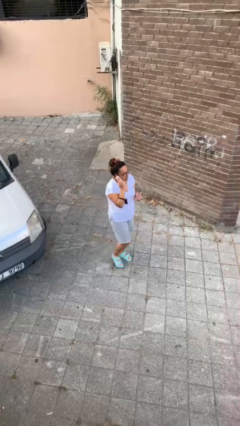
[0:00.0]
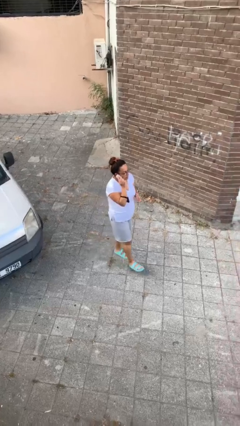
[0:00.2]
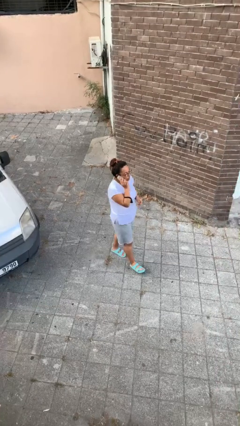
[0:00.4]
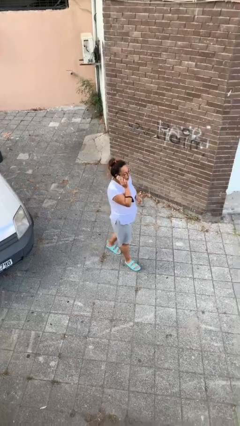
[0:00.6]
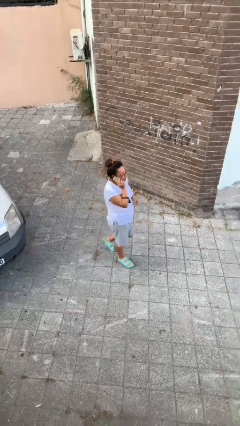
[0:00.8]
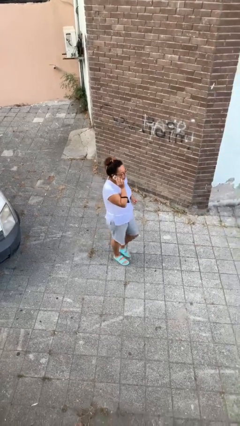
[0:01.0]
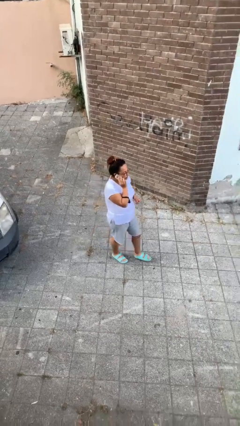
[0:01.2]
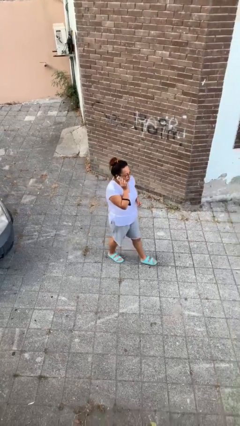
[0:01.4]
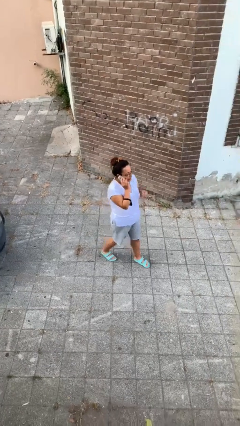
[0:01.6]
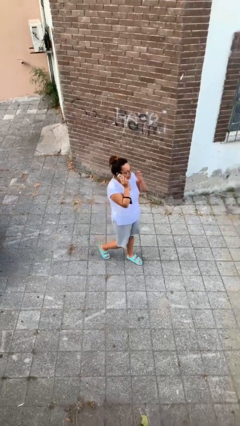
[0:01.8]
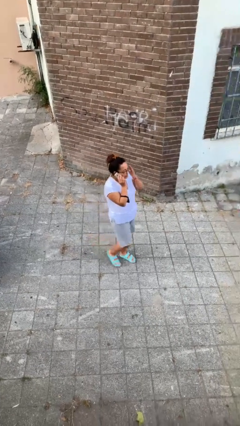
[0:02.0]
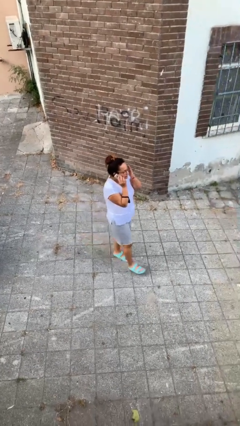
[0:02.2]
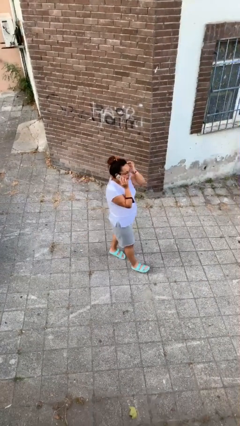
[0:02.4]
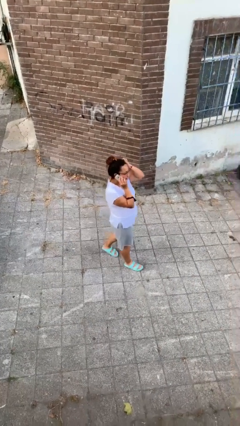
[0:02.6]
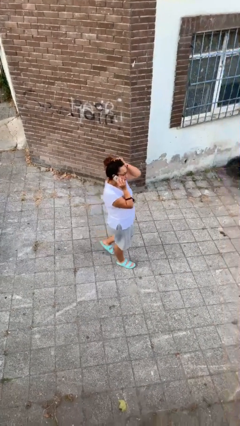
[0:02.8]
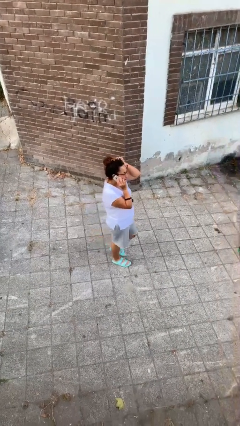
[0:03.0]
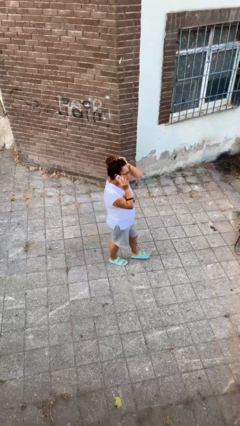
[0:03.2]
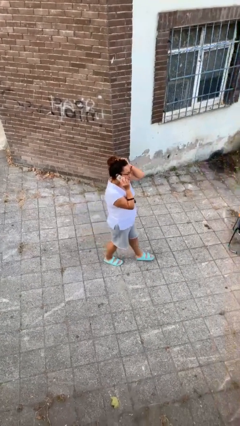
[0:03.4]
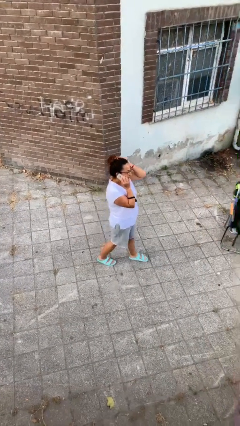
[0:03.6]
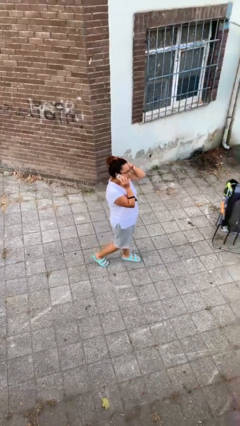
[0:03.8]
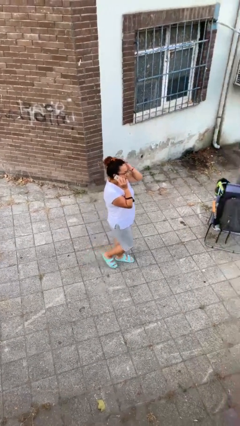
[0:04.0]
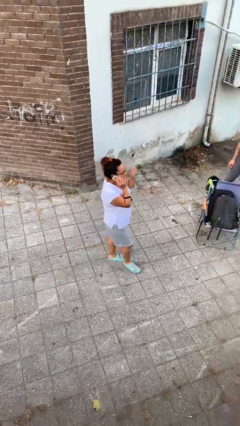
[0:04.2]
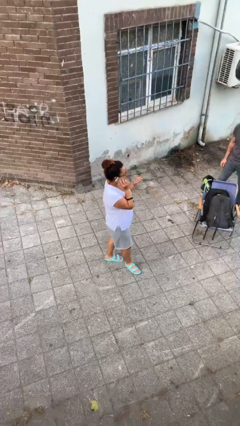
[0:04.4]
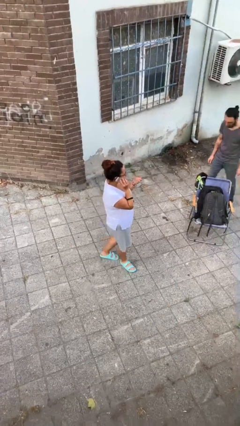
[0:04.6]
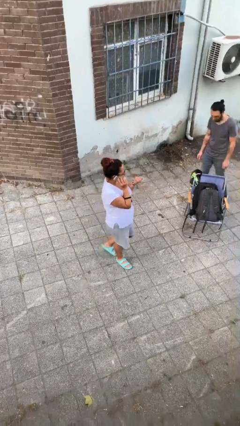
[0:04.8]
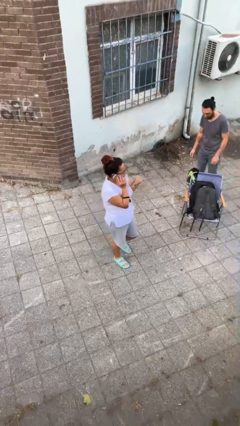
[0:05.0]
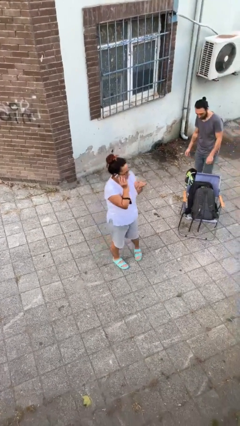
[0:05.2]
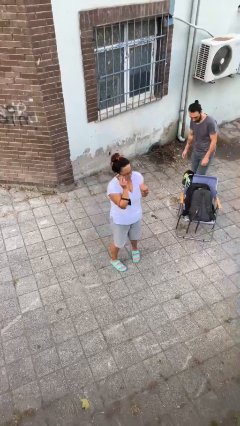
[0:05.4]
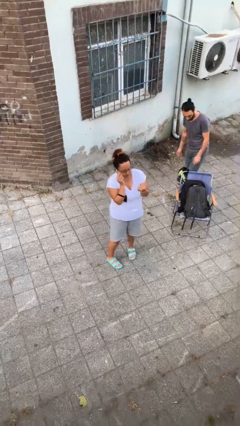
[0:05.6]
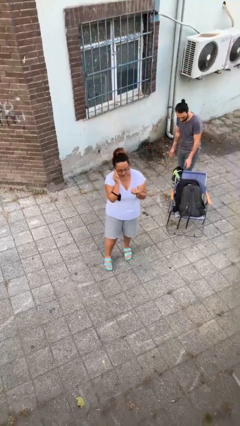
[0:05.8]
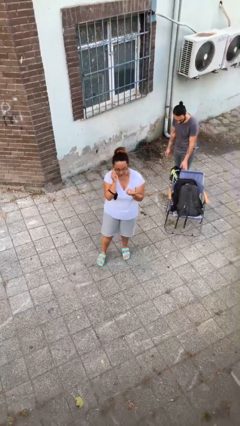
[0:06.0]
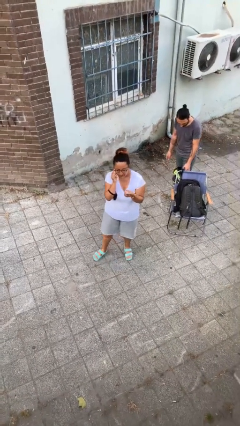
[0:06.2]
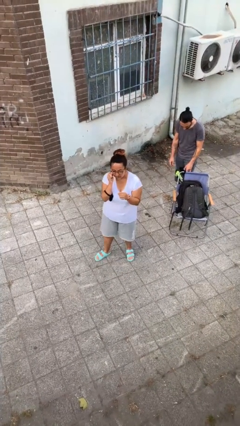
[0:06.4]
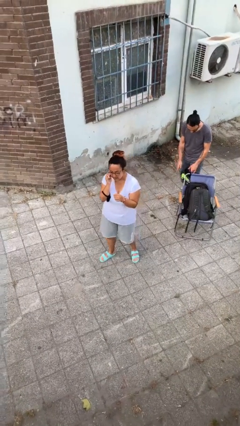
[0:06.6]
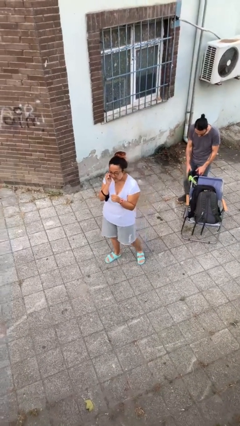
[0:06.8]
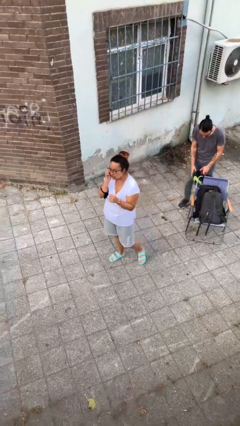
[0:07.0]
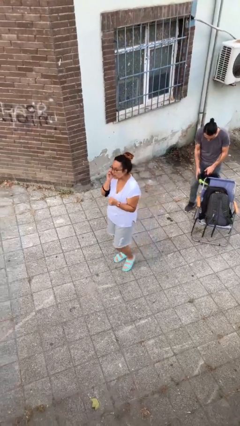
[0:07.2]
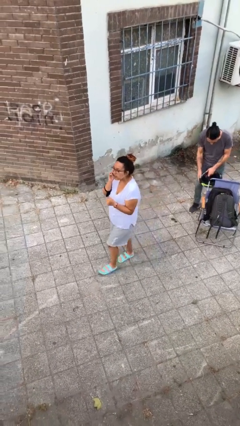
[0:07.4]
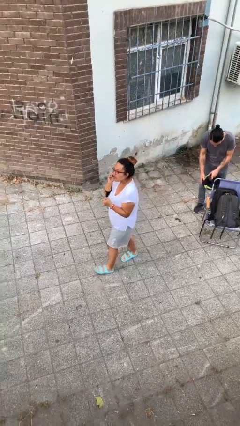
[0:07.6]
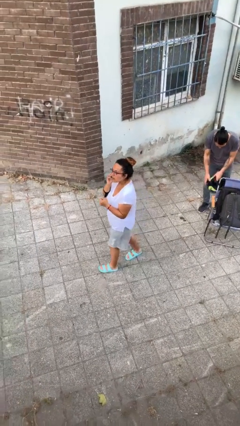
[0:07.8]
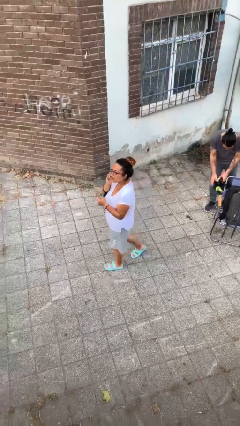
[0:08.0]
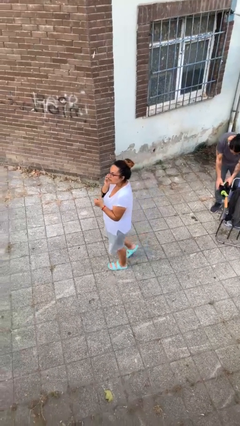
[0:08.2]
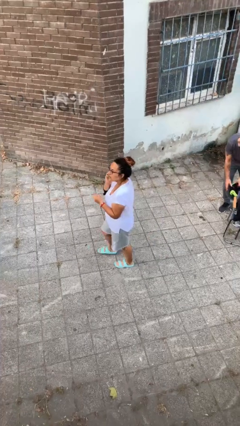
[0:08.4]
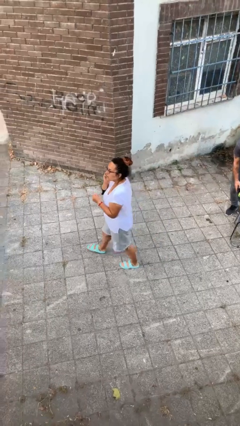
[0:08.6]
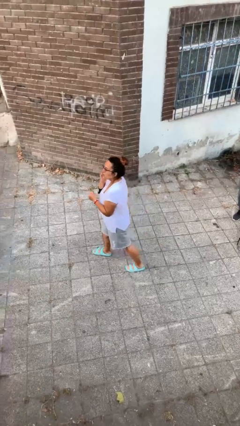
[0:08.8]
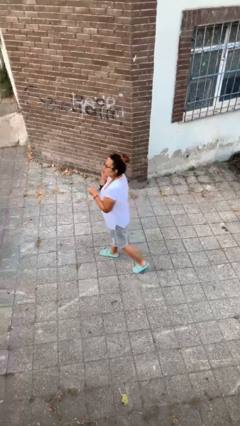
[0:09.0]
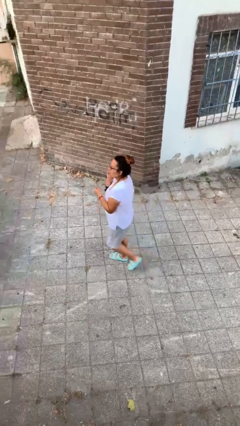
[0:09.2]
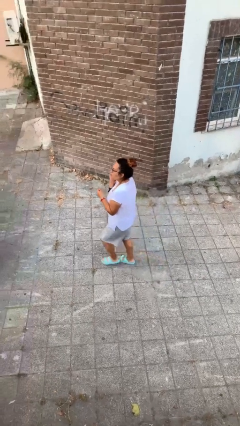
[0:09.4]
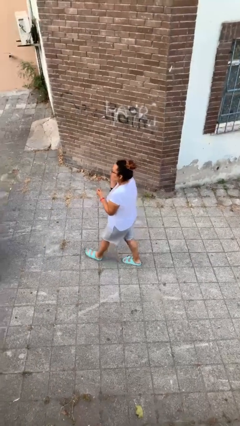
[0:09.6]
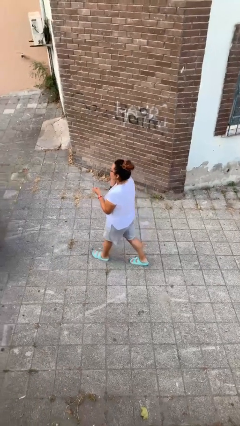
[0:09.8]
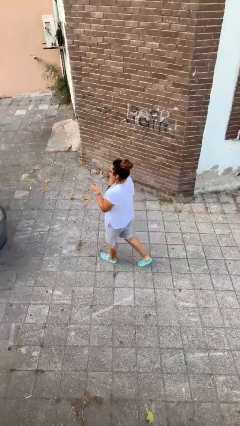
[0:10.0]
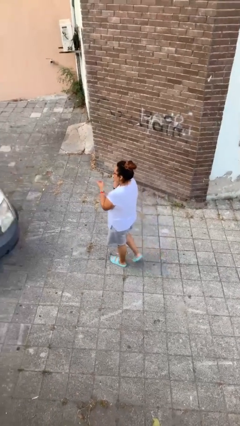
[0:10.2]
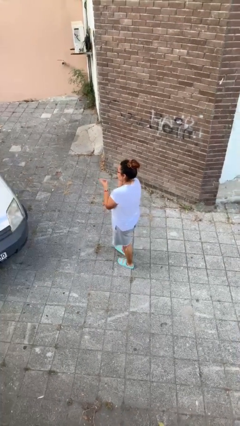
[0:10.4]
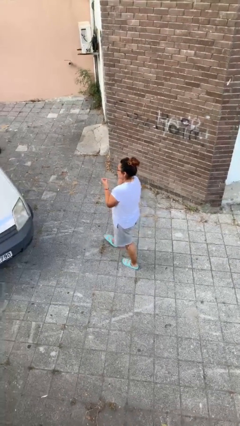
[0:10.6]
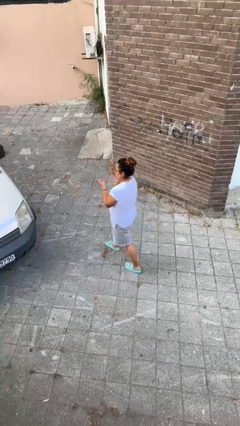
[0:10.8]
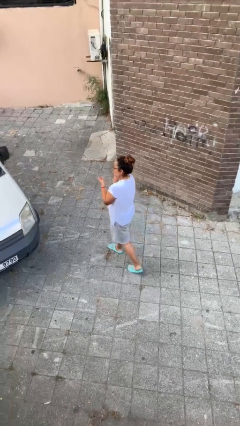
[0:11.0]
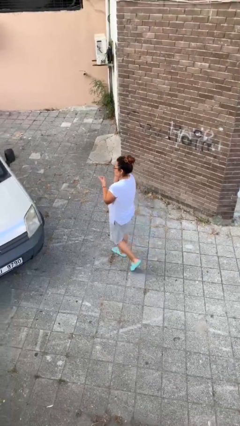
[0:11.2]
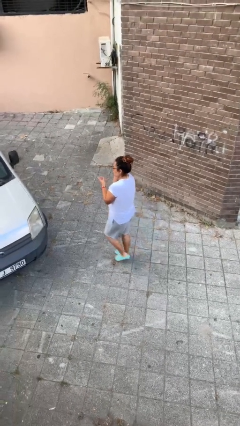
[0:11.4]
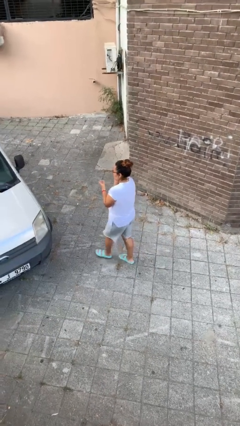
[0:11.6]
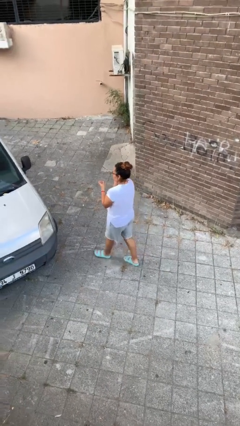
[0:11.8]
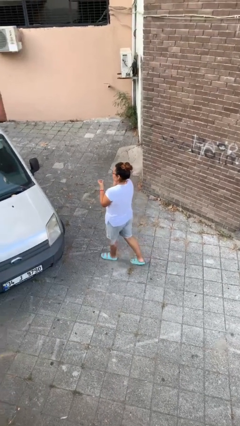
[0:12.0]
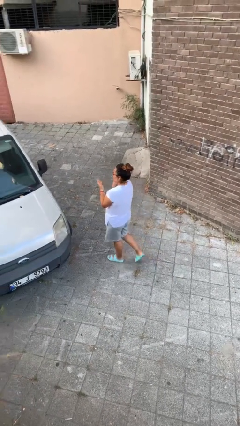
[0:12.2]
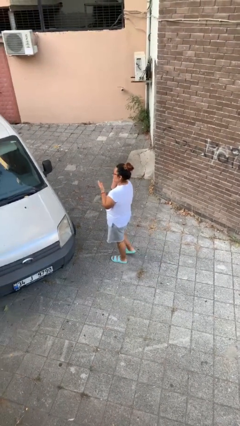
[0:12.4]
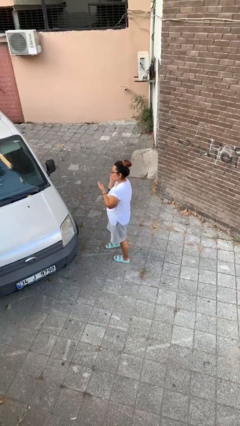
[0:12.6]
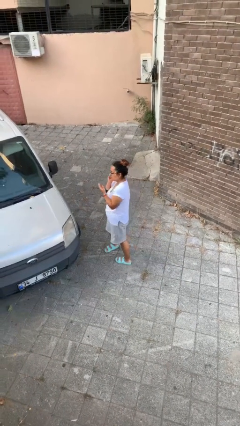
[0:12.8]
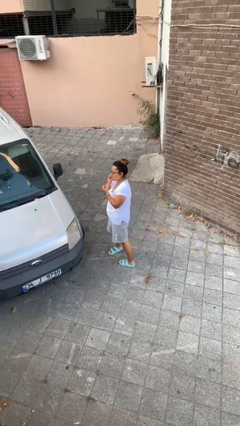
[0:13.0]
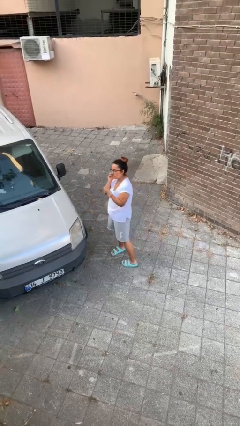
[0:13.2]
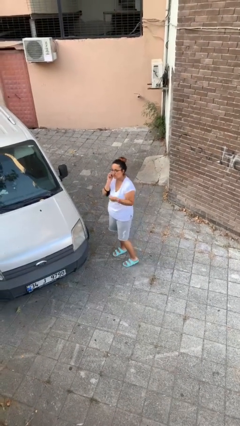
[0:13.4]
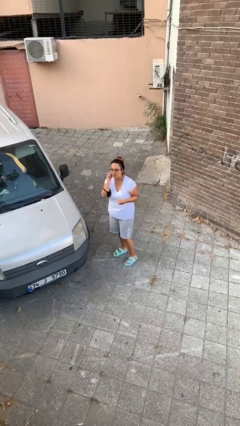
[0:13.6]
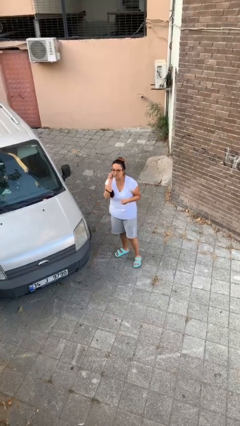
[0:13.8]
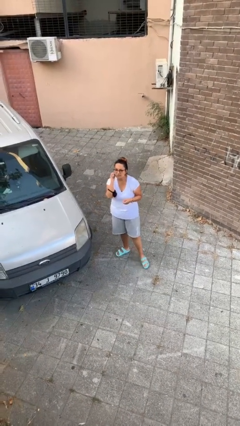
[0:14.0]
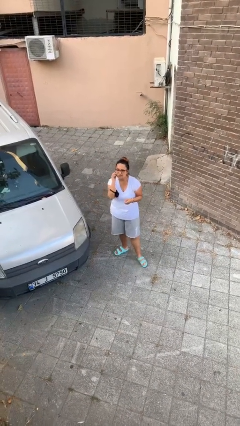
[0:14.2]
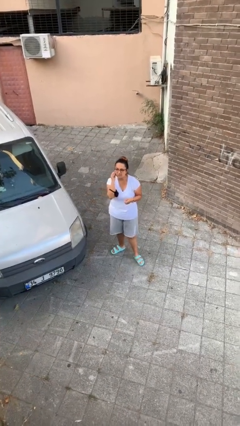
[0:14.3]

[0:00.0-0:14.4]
person talks on phone

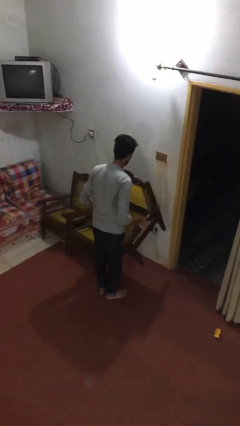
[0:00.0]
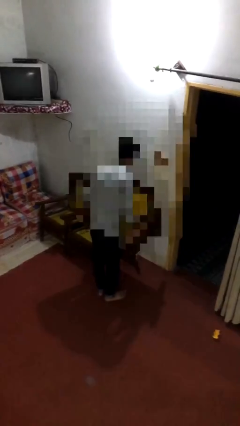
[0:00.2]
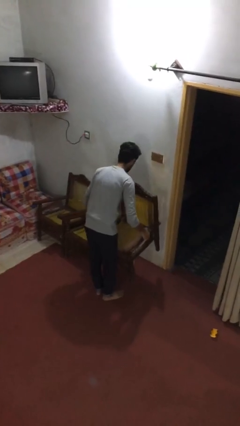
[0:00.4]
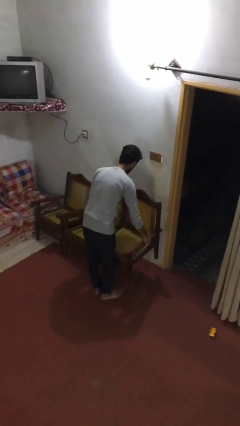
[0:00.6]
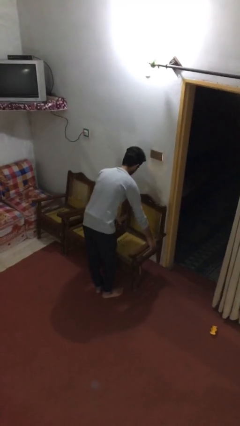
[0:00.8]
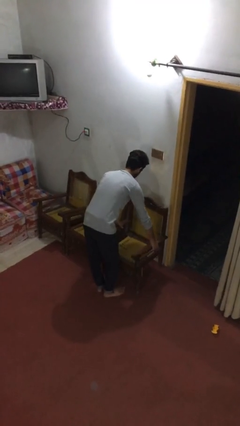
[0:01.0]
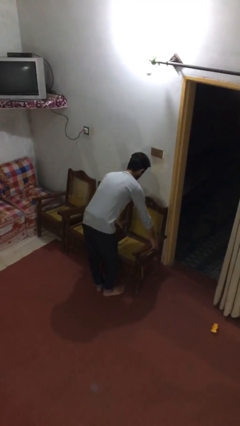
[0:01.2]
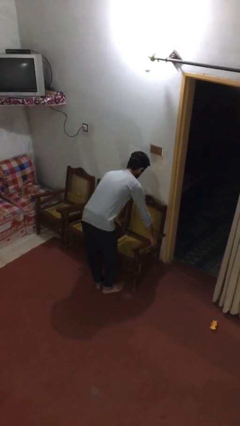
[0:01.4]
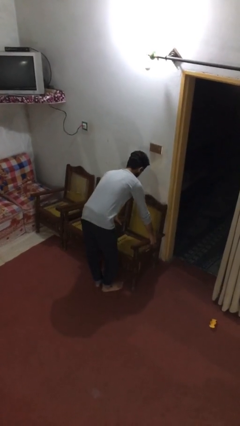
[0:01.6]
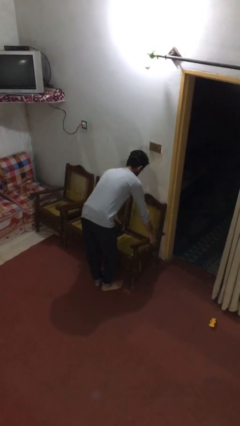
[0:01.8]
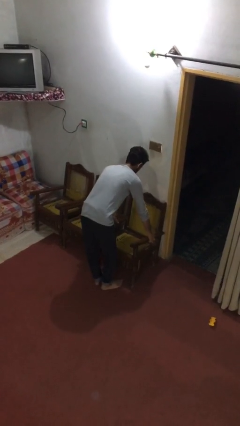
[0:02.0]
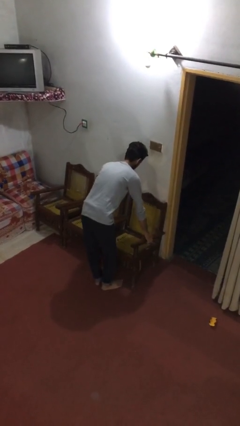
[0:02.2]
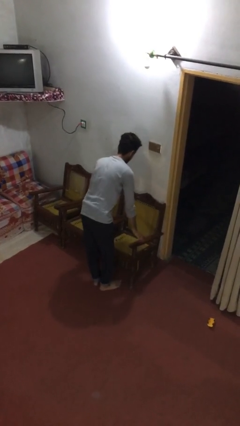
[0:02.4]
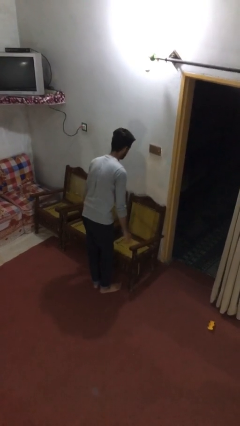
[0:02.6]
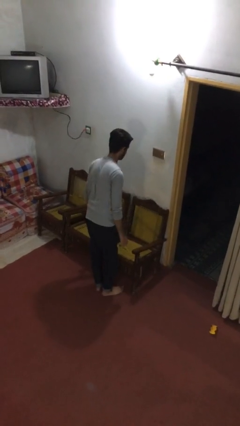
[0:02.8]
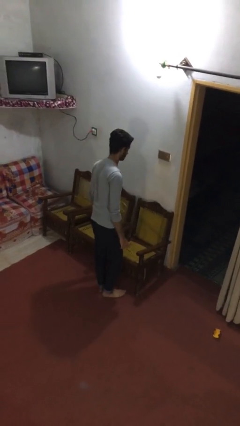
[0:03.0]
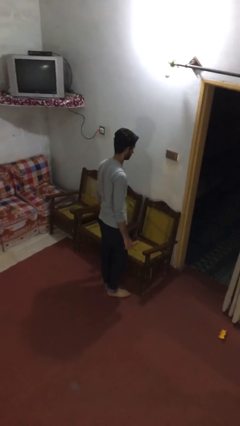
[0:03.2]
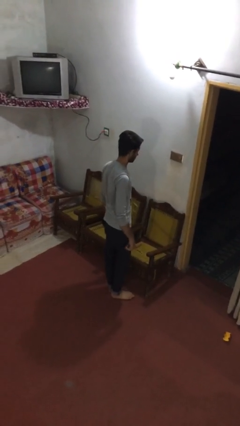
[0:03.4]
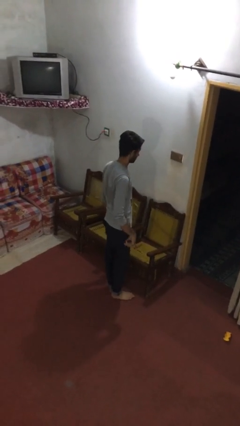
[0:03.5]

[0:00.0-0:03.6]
person puts down object on floor
